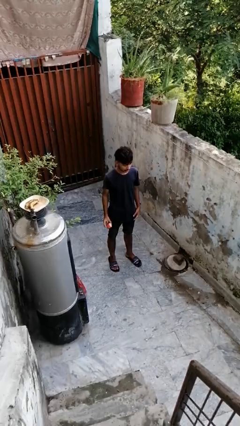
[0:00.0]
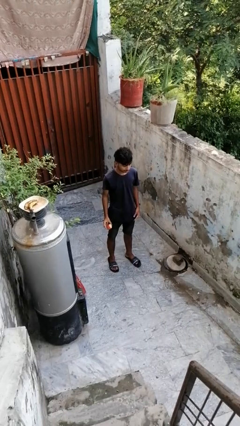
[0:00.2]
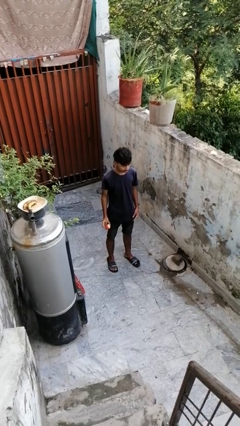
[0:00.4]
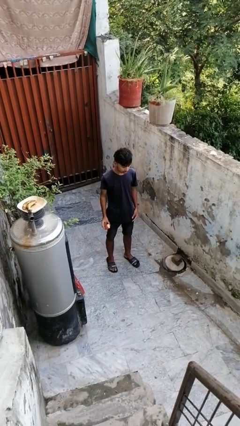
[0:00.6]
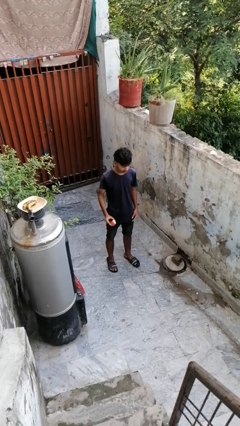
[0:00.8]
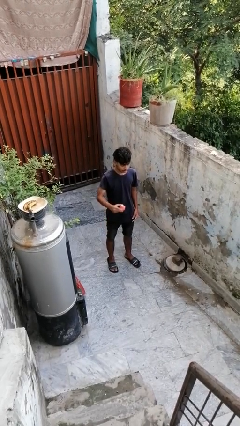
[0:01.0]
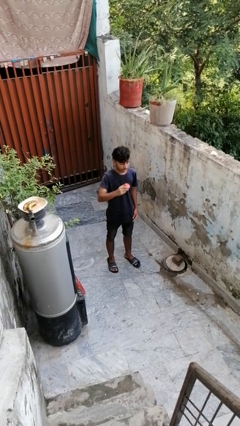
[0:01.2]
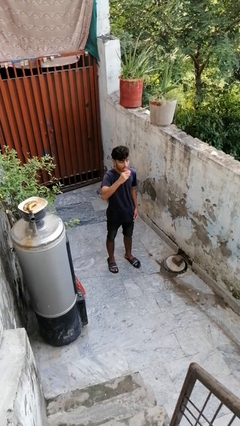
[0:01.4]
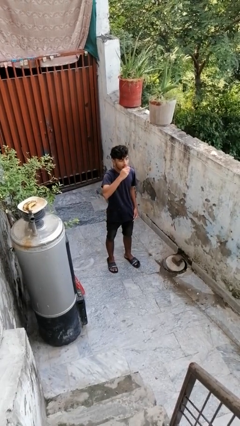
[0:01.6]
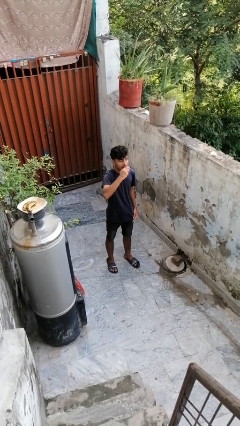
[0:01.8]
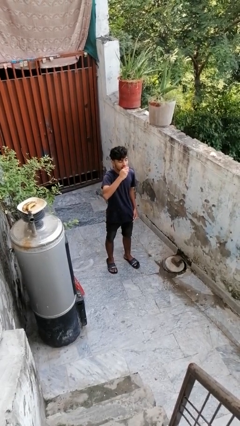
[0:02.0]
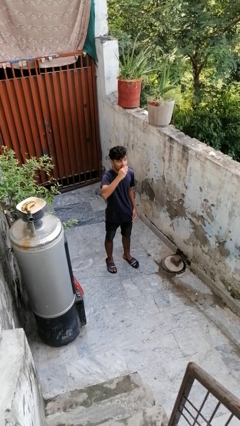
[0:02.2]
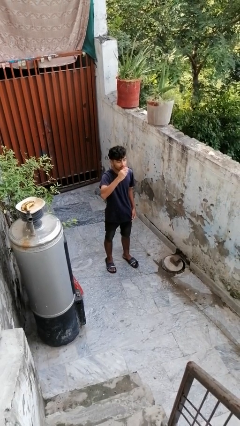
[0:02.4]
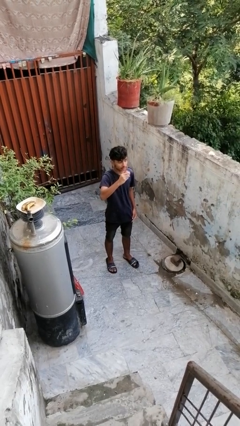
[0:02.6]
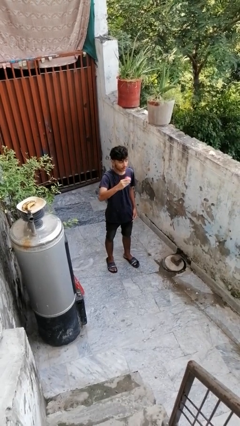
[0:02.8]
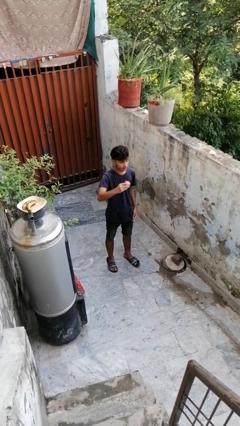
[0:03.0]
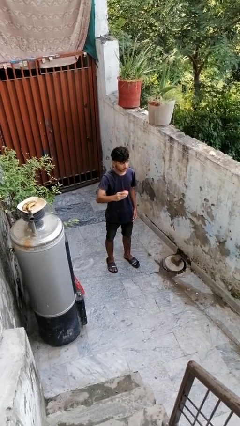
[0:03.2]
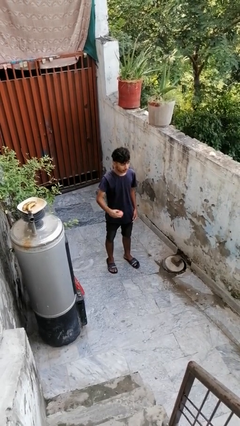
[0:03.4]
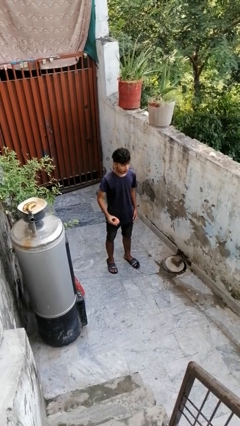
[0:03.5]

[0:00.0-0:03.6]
person eats apple

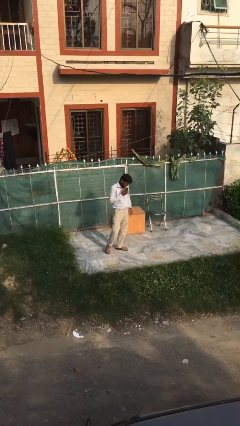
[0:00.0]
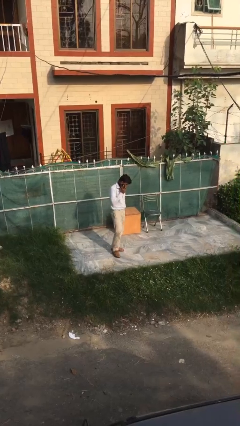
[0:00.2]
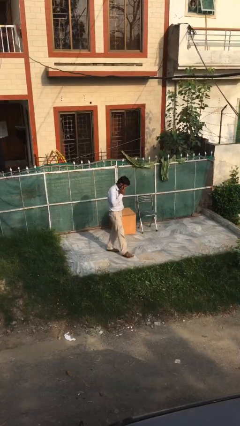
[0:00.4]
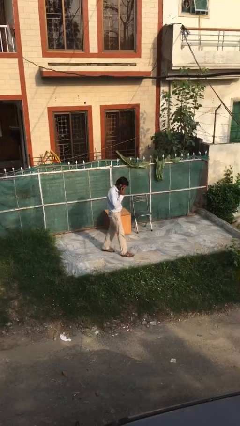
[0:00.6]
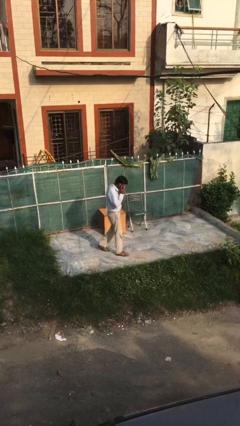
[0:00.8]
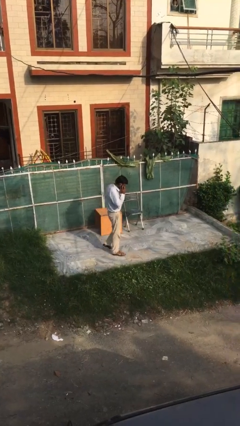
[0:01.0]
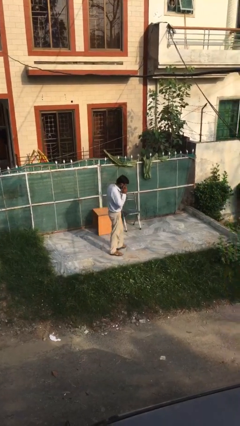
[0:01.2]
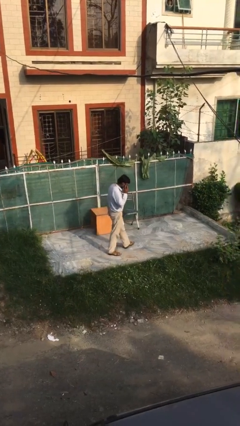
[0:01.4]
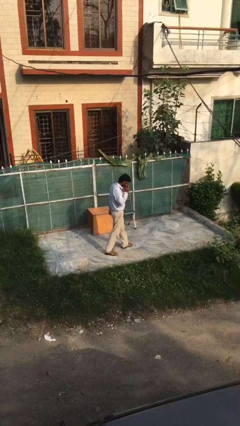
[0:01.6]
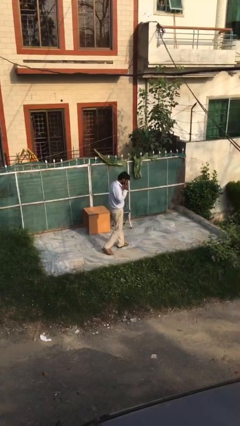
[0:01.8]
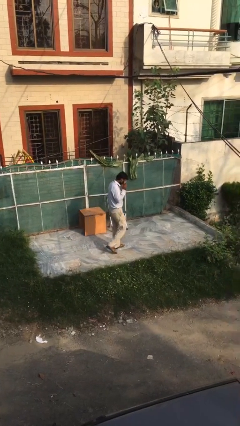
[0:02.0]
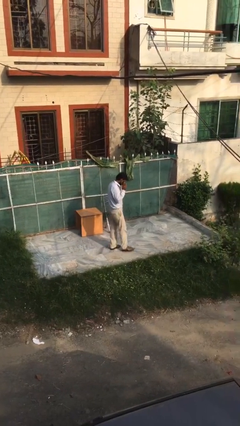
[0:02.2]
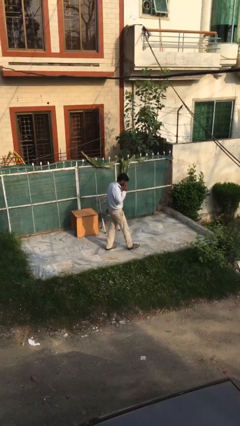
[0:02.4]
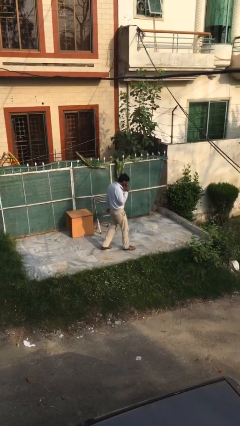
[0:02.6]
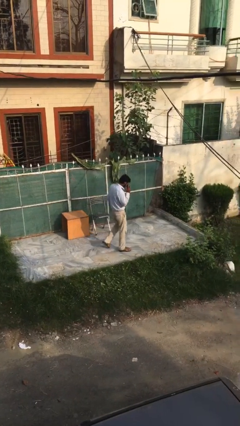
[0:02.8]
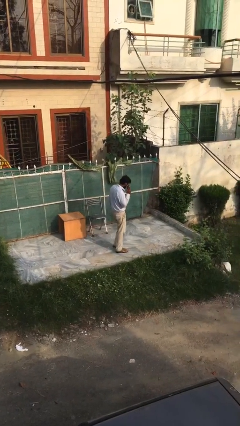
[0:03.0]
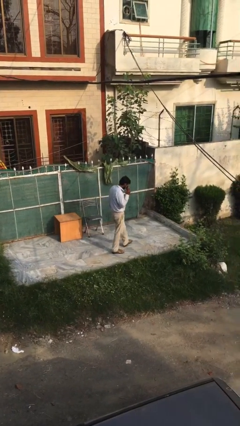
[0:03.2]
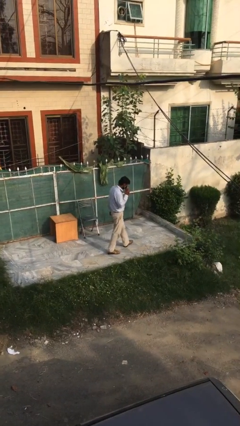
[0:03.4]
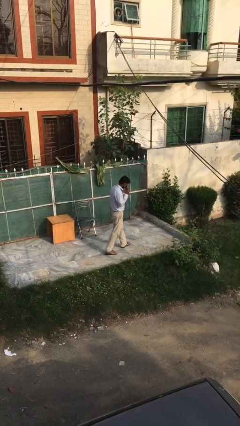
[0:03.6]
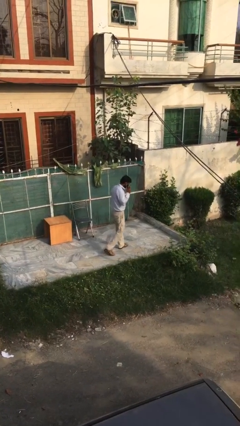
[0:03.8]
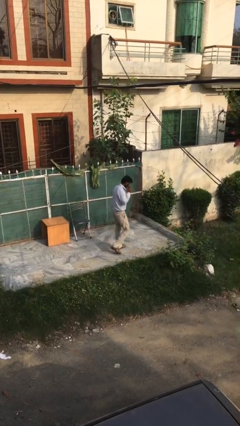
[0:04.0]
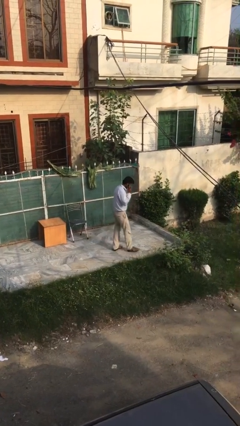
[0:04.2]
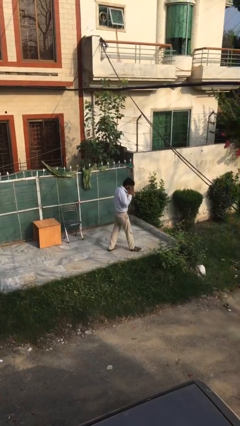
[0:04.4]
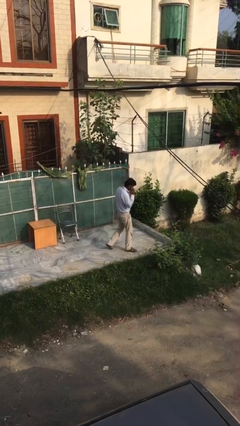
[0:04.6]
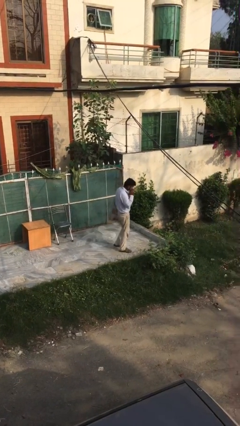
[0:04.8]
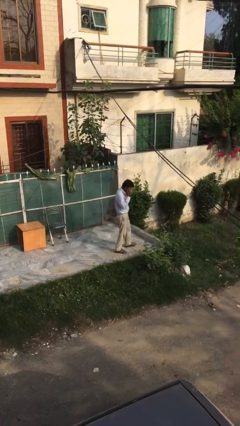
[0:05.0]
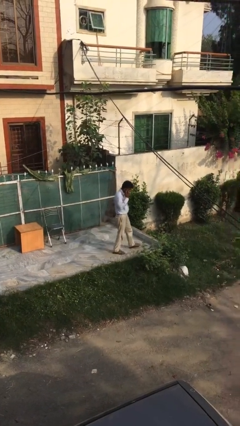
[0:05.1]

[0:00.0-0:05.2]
person talks on phone

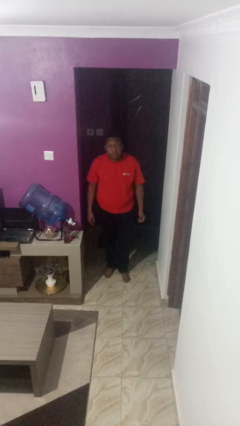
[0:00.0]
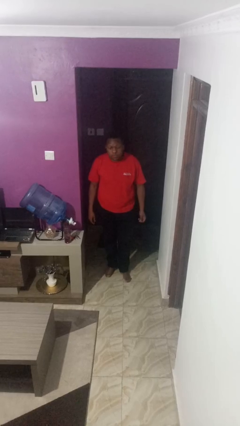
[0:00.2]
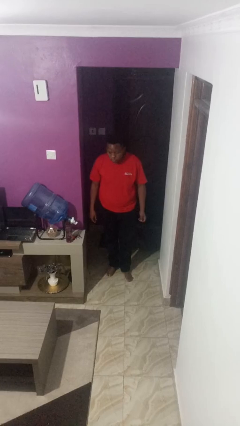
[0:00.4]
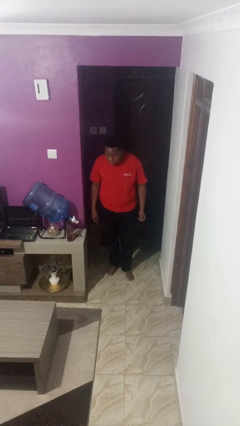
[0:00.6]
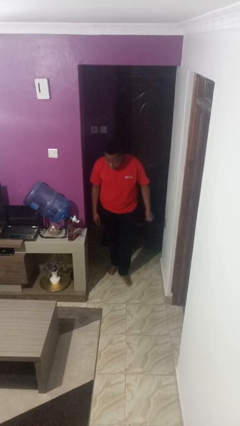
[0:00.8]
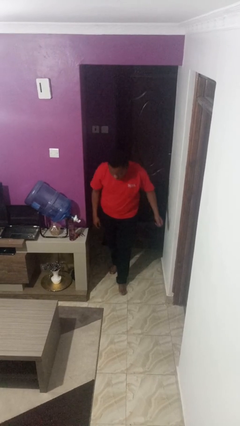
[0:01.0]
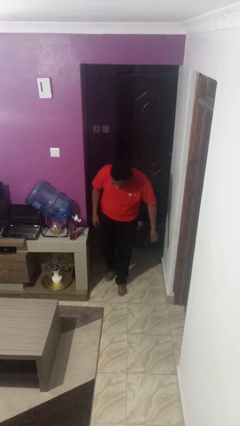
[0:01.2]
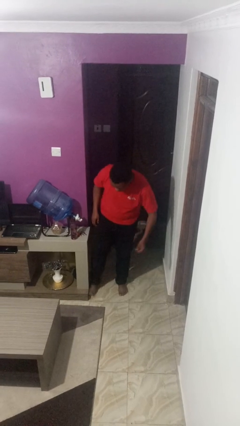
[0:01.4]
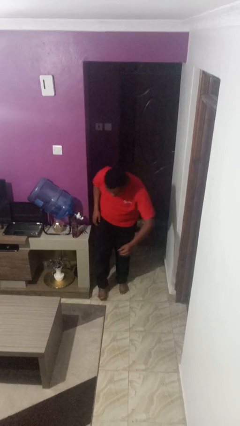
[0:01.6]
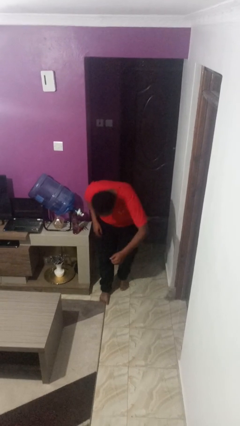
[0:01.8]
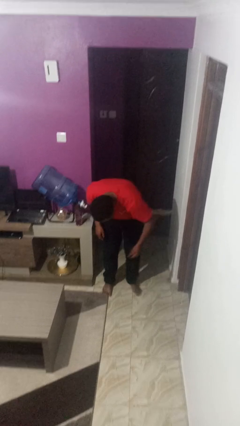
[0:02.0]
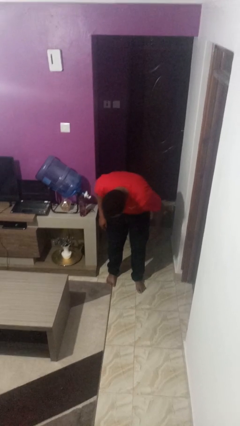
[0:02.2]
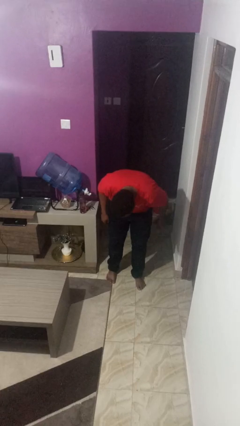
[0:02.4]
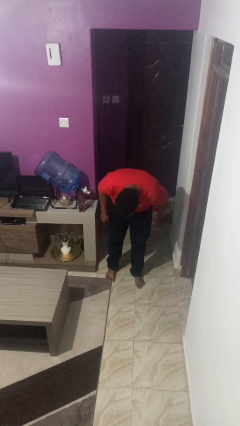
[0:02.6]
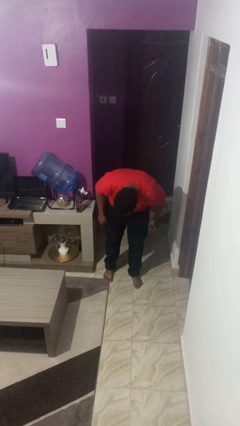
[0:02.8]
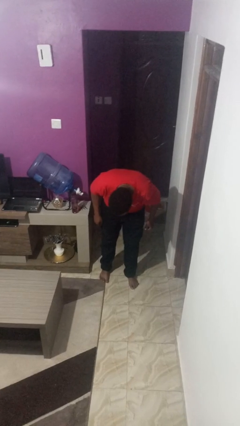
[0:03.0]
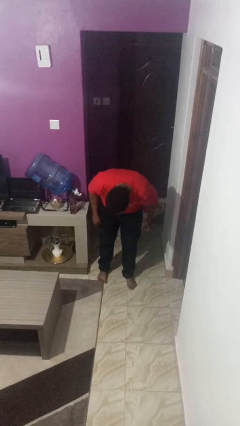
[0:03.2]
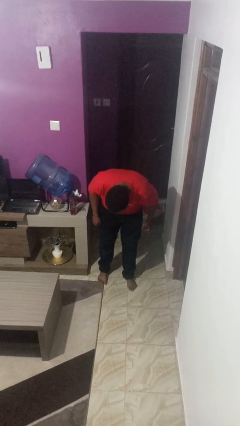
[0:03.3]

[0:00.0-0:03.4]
person stubs toe

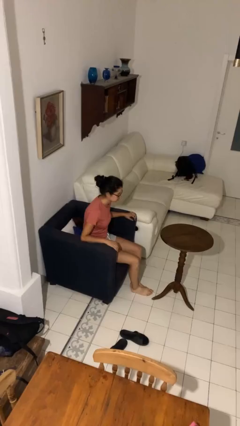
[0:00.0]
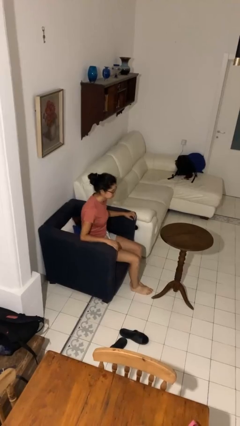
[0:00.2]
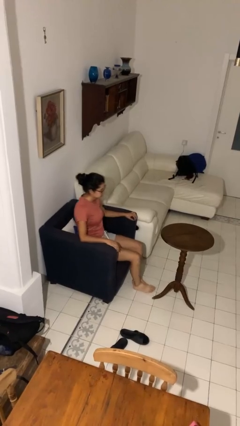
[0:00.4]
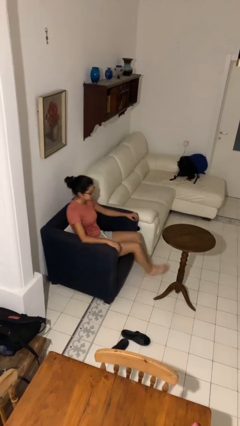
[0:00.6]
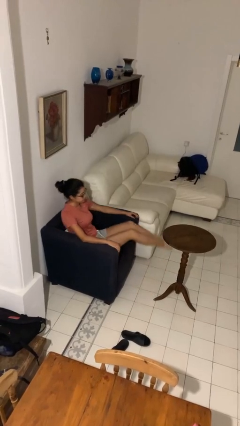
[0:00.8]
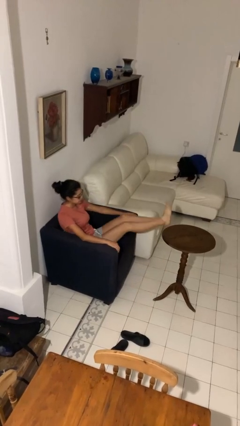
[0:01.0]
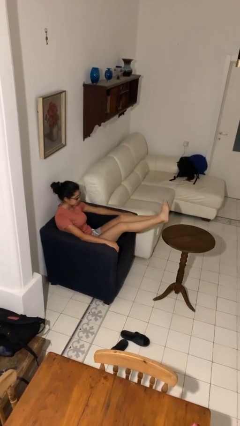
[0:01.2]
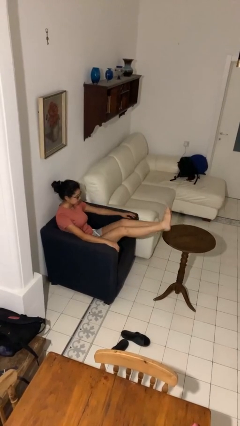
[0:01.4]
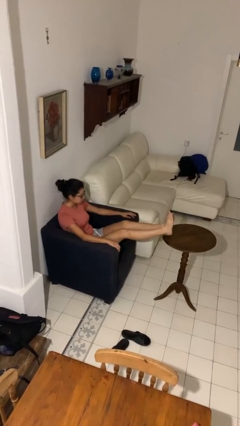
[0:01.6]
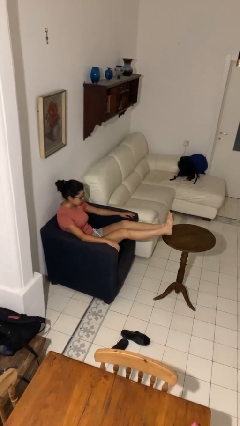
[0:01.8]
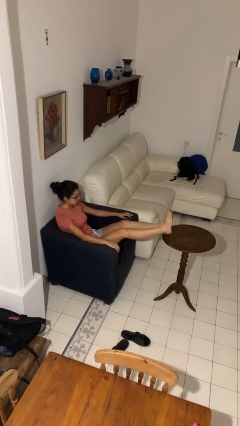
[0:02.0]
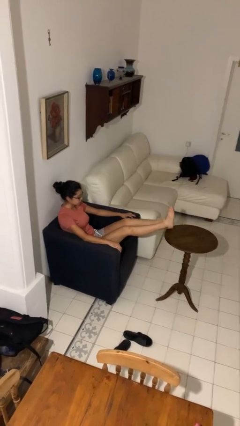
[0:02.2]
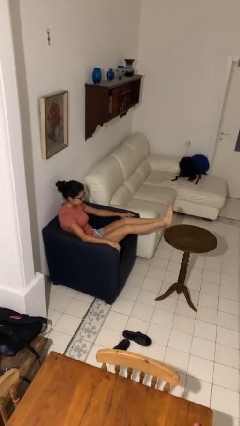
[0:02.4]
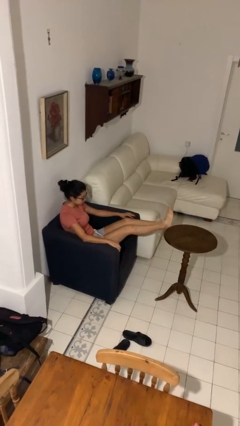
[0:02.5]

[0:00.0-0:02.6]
person puts feet up

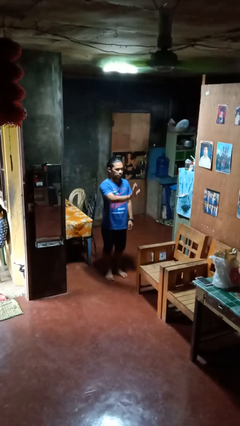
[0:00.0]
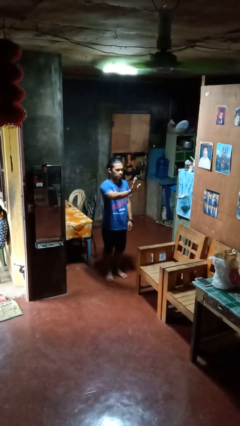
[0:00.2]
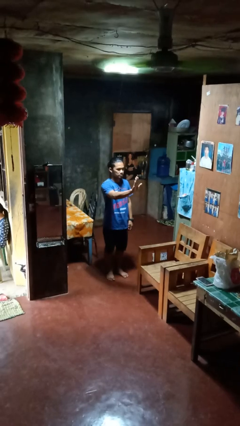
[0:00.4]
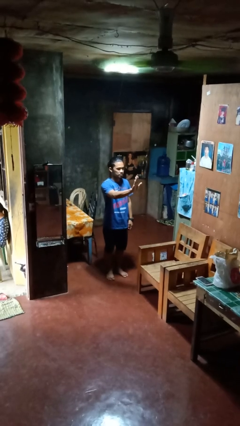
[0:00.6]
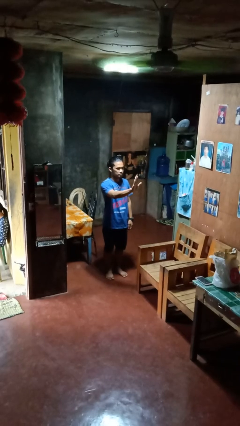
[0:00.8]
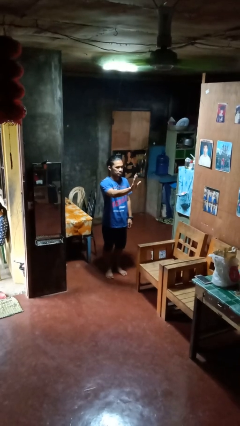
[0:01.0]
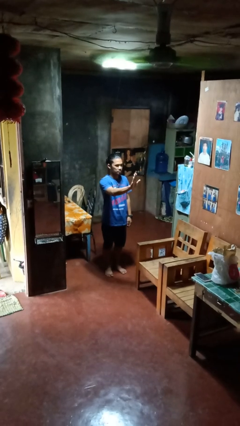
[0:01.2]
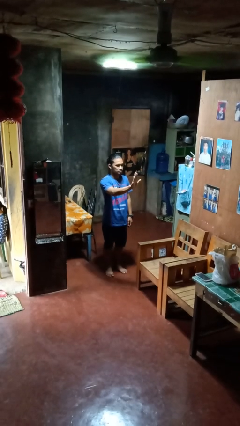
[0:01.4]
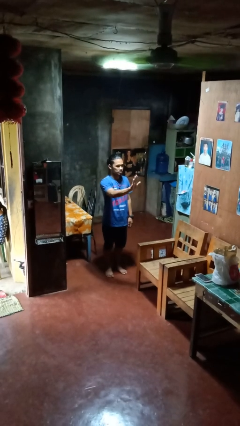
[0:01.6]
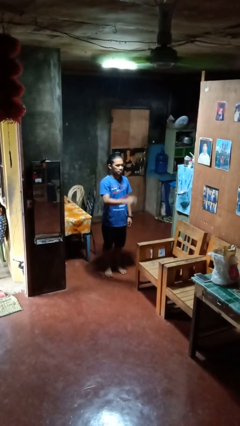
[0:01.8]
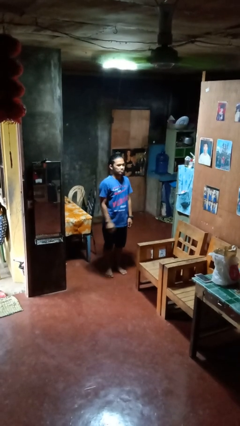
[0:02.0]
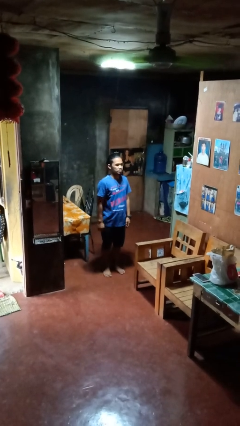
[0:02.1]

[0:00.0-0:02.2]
person gestures stop

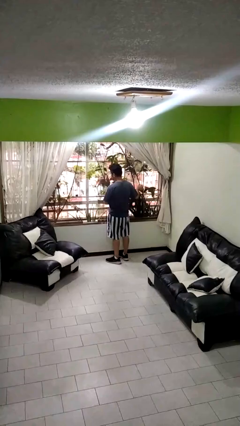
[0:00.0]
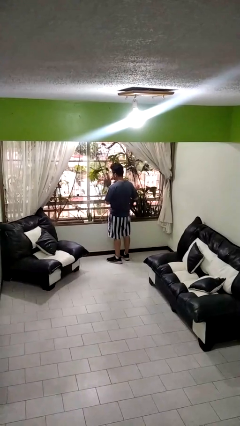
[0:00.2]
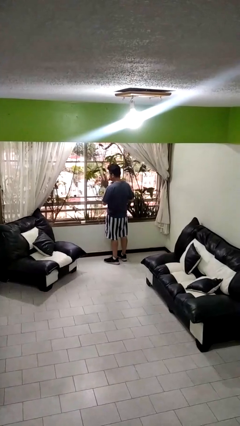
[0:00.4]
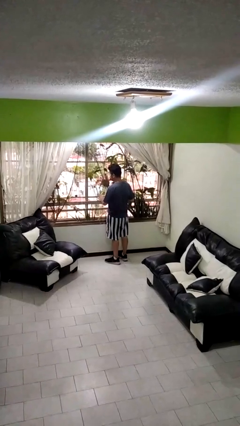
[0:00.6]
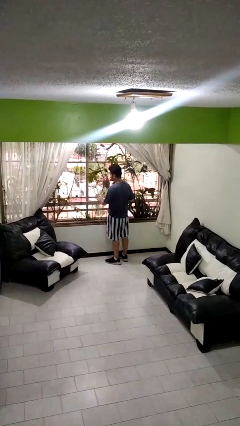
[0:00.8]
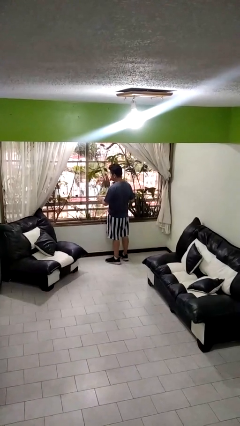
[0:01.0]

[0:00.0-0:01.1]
person closes home window
